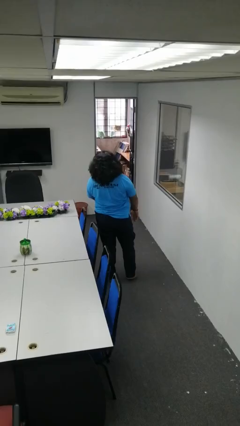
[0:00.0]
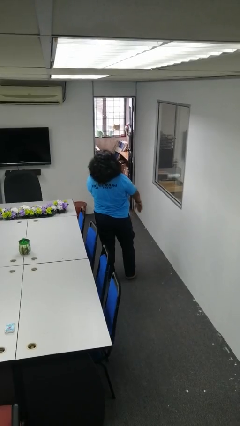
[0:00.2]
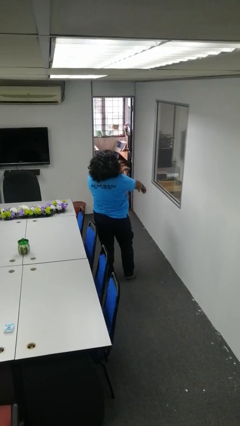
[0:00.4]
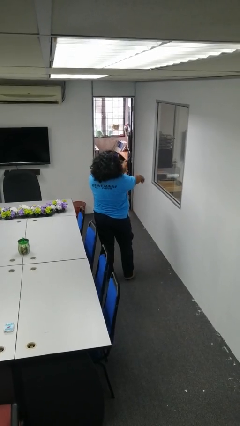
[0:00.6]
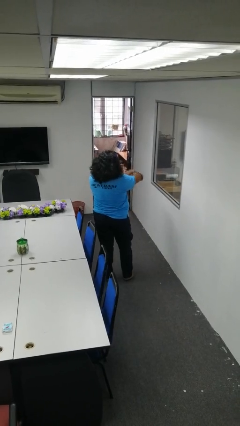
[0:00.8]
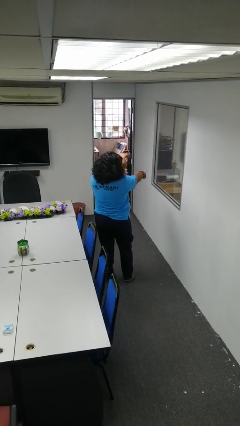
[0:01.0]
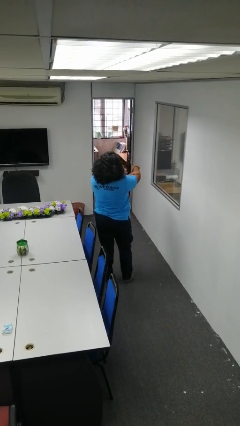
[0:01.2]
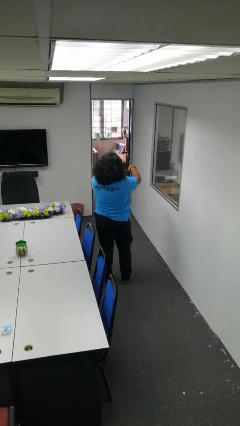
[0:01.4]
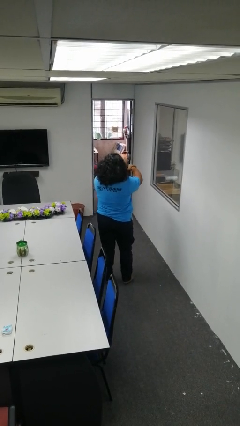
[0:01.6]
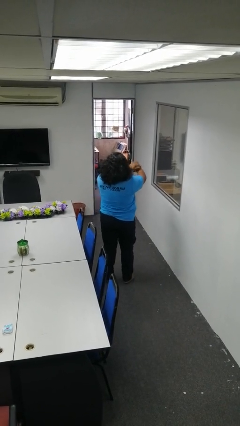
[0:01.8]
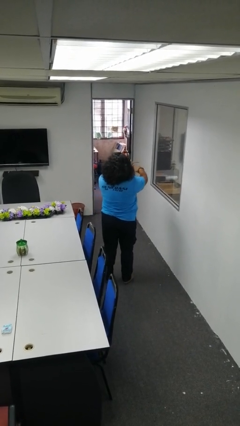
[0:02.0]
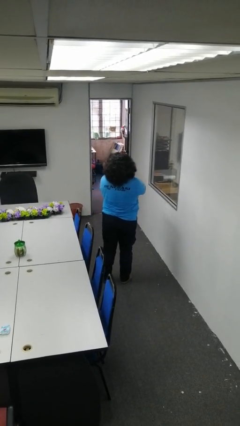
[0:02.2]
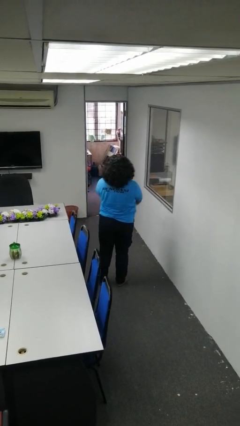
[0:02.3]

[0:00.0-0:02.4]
person swats bug

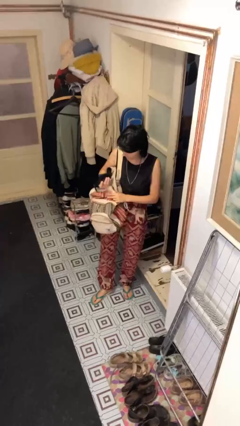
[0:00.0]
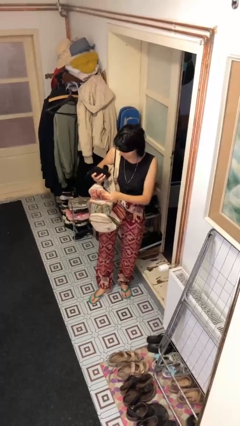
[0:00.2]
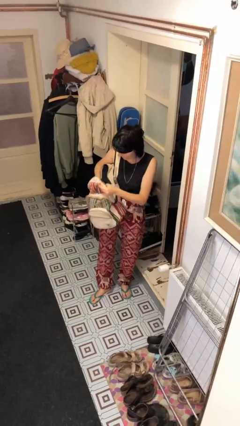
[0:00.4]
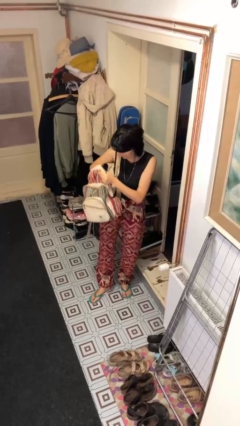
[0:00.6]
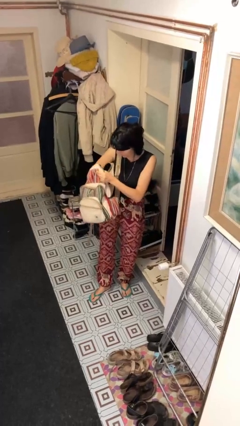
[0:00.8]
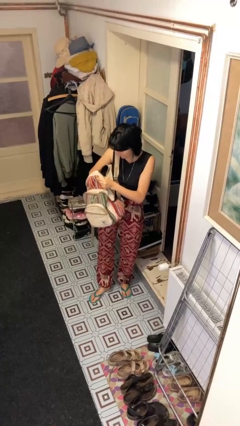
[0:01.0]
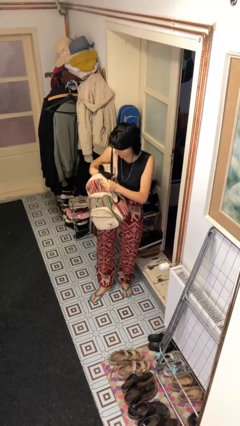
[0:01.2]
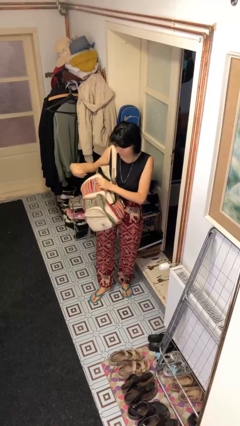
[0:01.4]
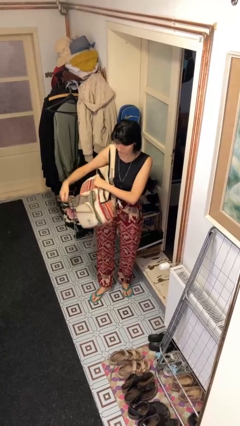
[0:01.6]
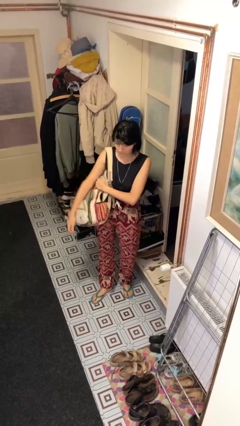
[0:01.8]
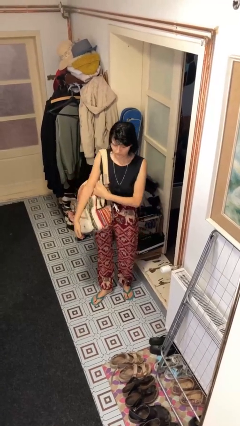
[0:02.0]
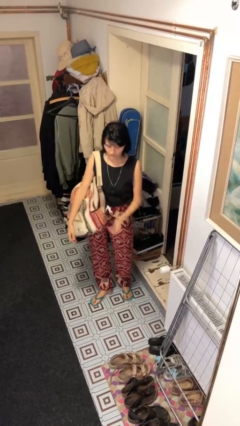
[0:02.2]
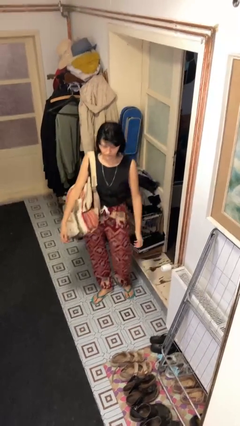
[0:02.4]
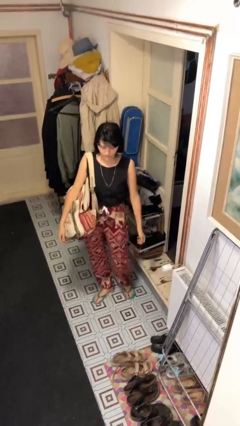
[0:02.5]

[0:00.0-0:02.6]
person puts object into backpack

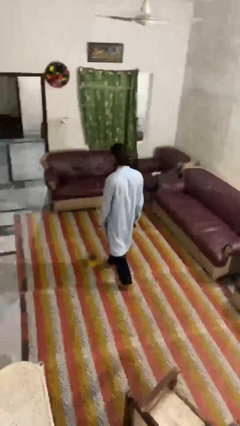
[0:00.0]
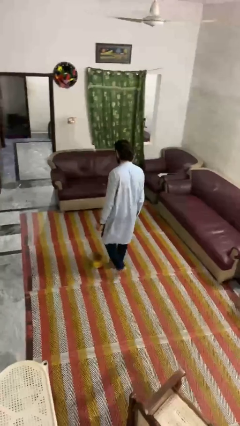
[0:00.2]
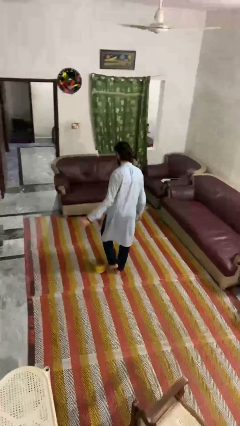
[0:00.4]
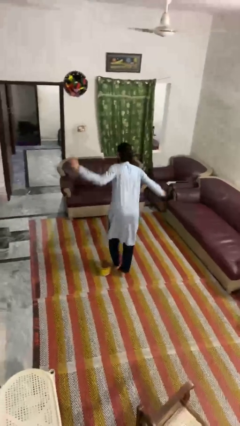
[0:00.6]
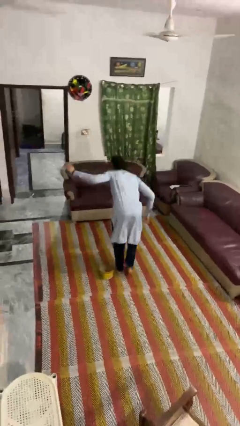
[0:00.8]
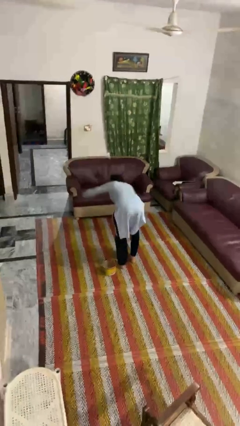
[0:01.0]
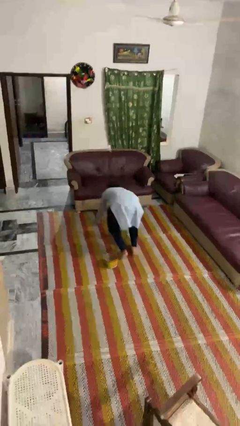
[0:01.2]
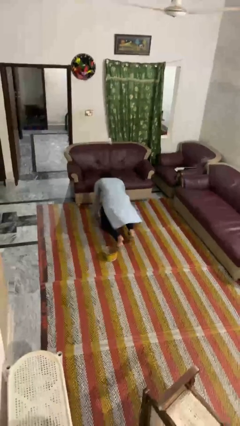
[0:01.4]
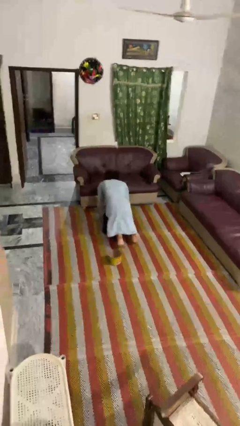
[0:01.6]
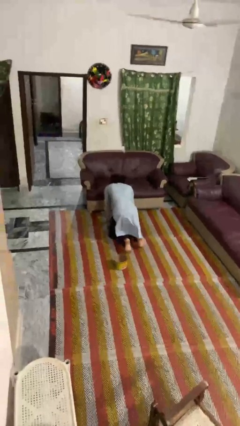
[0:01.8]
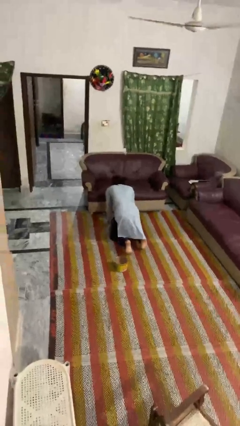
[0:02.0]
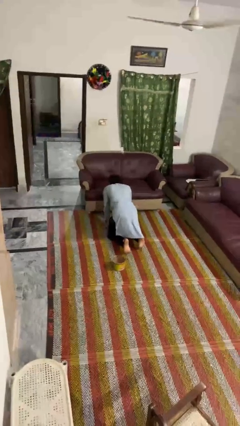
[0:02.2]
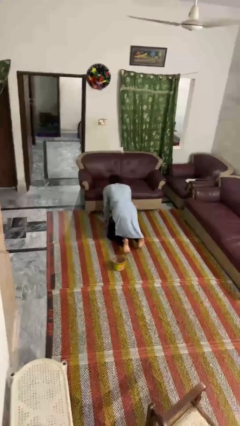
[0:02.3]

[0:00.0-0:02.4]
person trips on object on floor

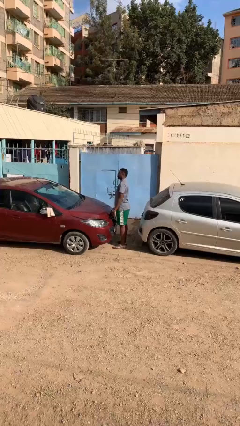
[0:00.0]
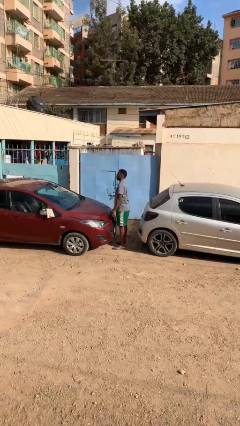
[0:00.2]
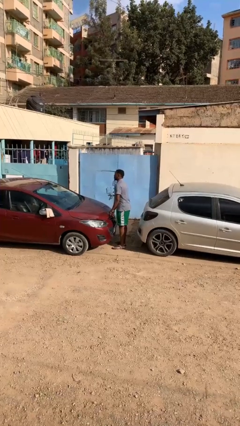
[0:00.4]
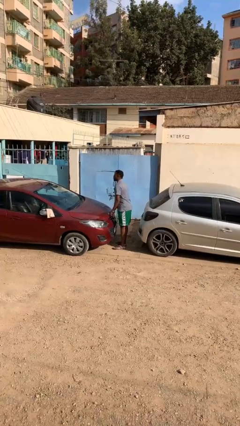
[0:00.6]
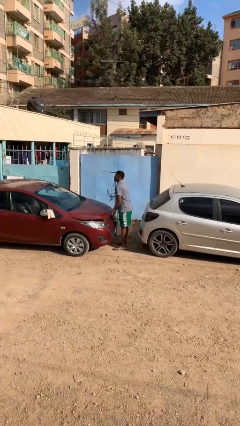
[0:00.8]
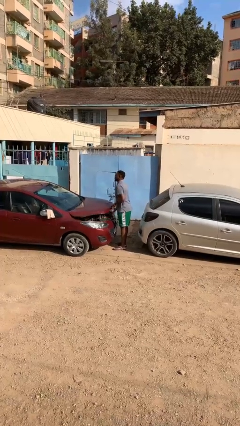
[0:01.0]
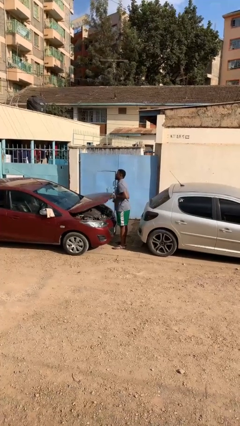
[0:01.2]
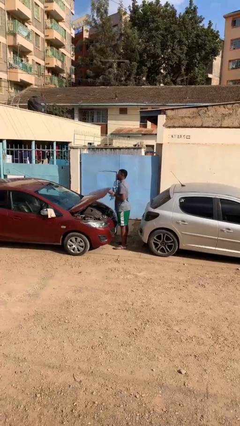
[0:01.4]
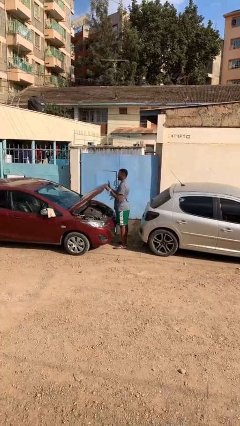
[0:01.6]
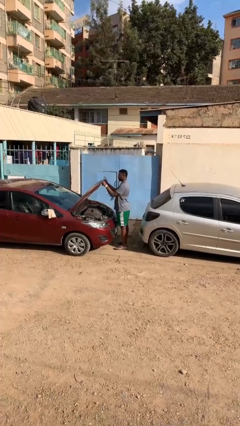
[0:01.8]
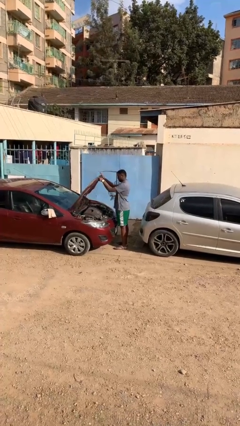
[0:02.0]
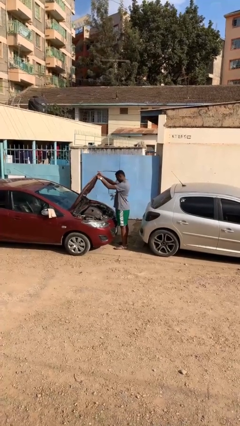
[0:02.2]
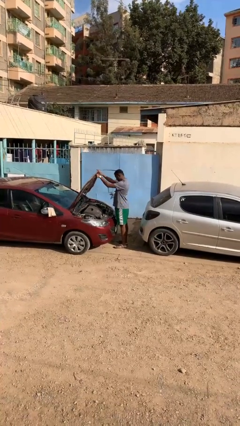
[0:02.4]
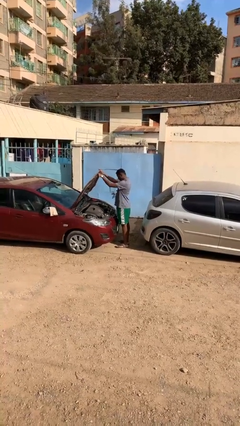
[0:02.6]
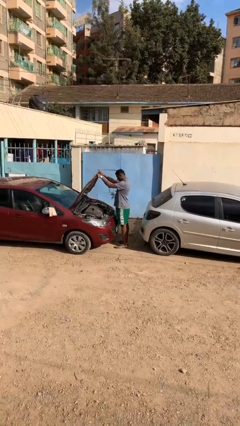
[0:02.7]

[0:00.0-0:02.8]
person opens car hood

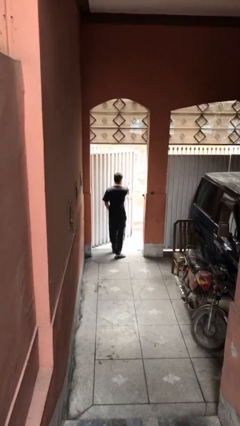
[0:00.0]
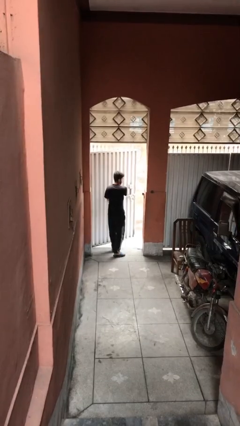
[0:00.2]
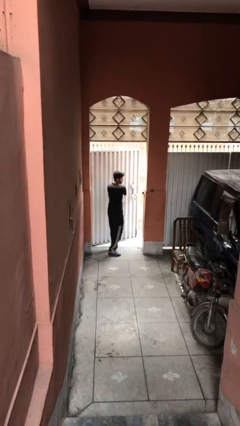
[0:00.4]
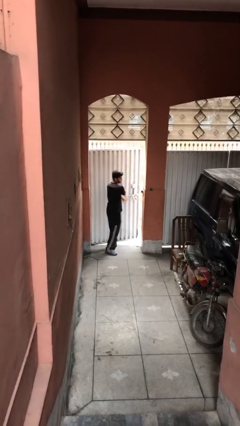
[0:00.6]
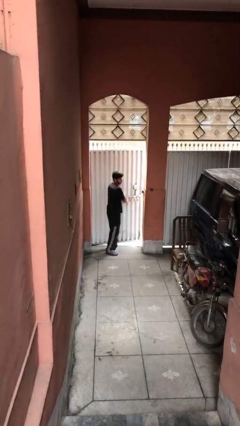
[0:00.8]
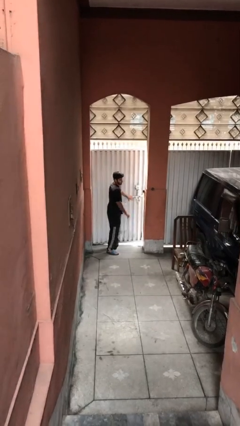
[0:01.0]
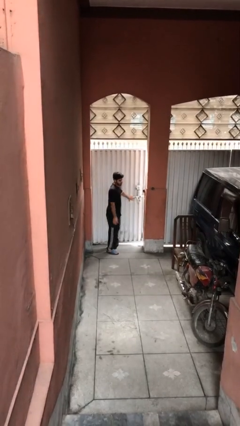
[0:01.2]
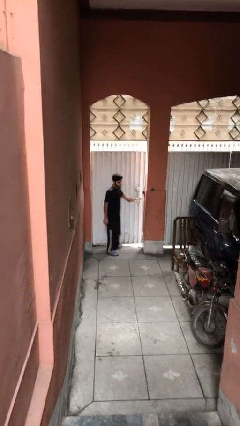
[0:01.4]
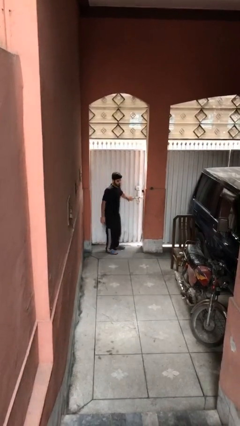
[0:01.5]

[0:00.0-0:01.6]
person closes facility door

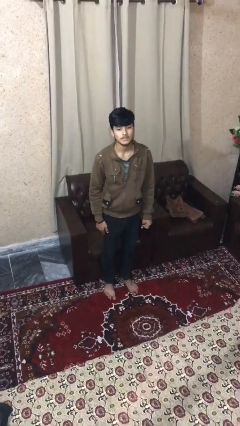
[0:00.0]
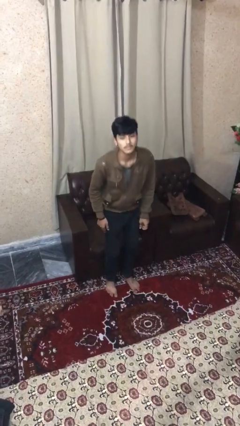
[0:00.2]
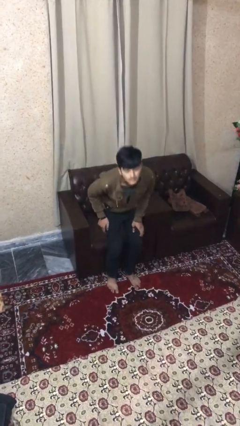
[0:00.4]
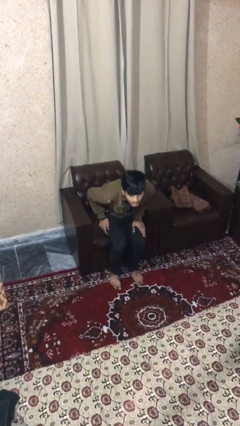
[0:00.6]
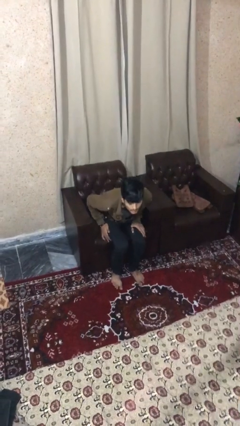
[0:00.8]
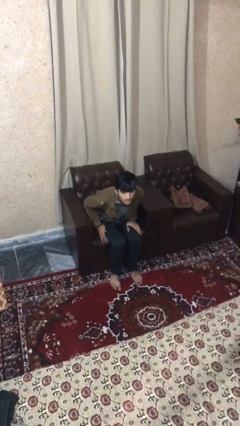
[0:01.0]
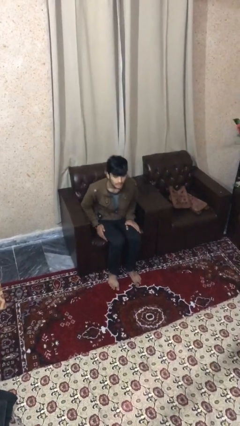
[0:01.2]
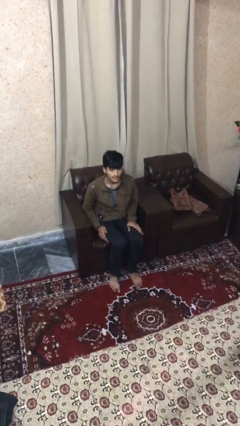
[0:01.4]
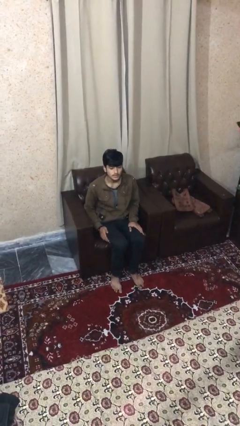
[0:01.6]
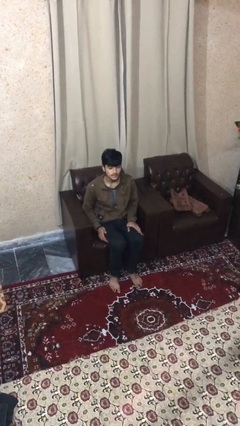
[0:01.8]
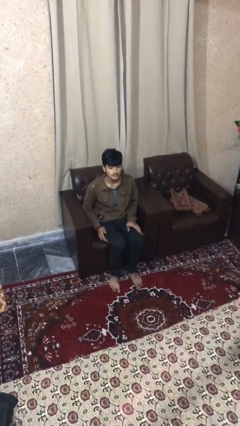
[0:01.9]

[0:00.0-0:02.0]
person sits down

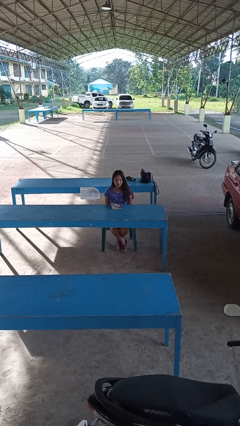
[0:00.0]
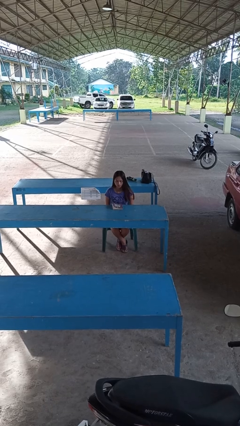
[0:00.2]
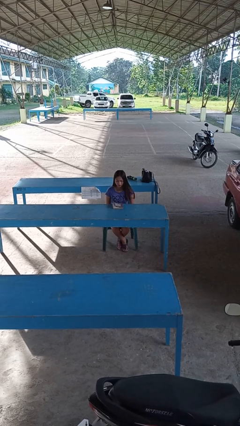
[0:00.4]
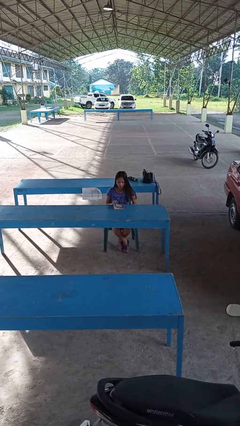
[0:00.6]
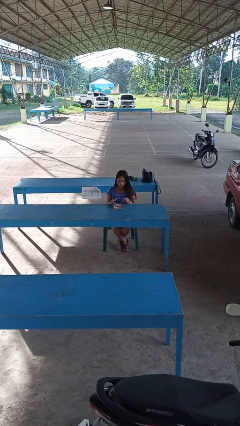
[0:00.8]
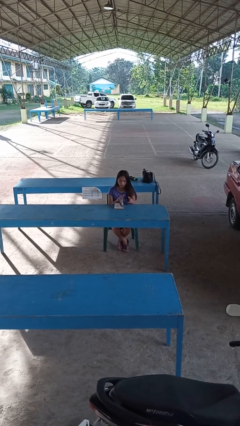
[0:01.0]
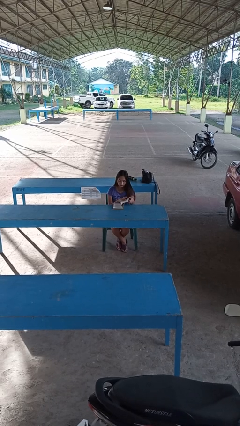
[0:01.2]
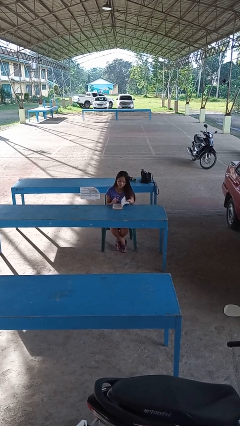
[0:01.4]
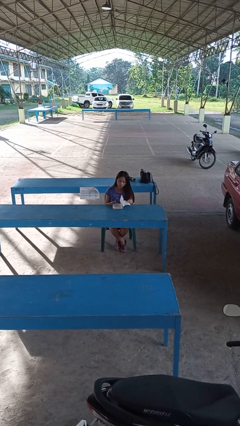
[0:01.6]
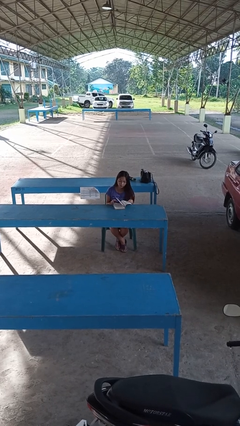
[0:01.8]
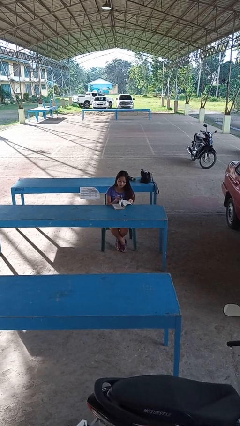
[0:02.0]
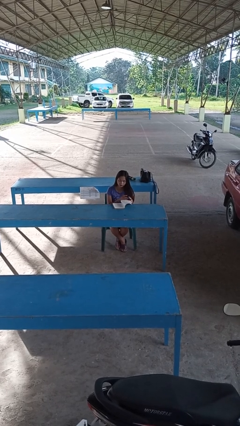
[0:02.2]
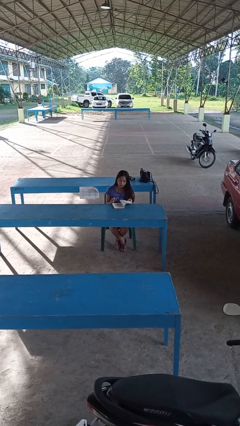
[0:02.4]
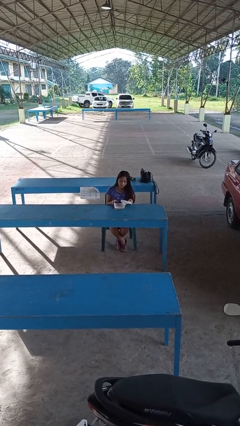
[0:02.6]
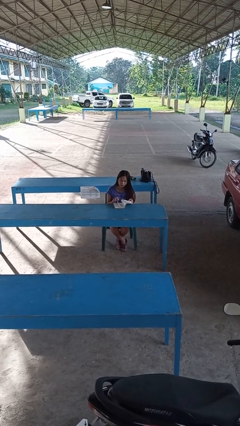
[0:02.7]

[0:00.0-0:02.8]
person reads book

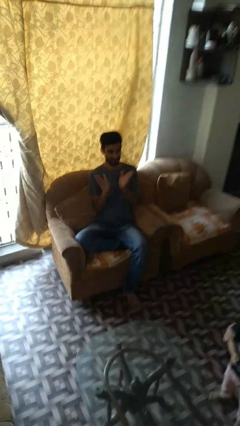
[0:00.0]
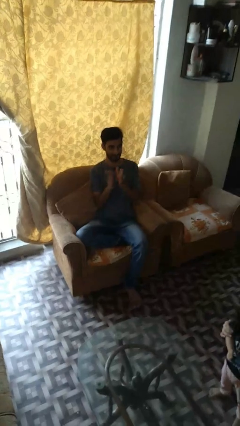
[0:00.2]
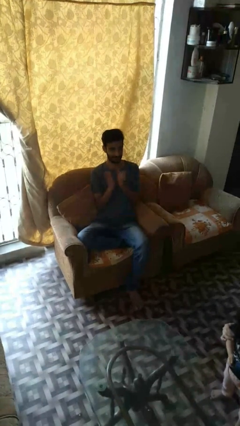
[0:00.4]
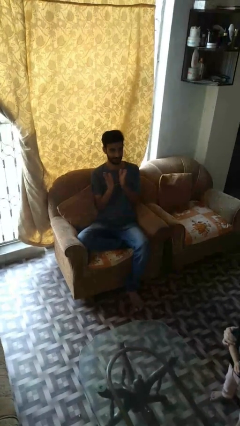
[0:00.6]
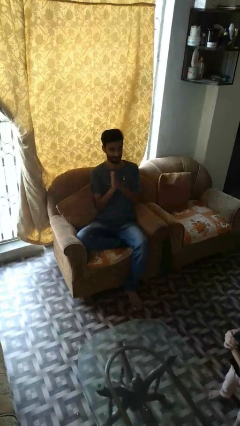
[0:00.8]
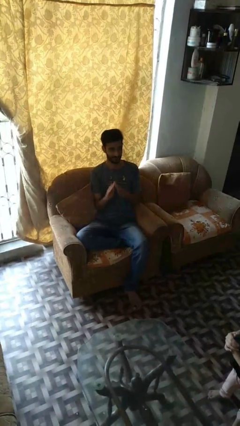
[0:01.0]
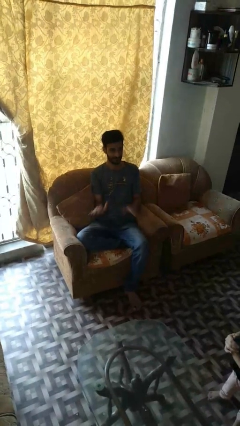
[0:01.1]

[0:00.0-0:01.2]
person claps hands
